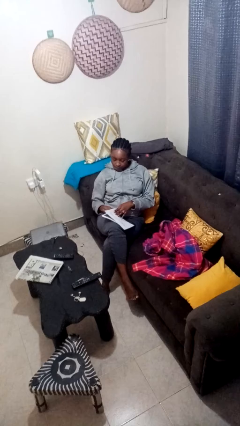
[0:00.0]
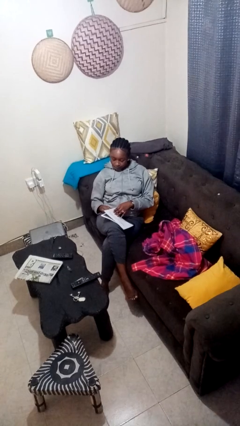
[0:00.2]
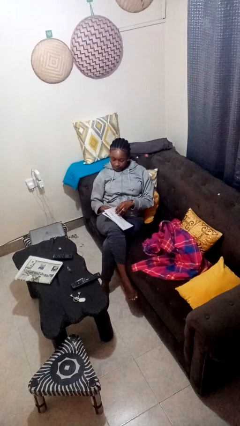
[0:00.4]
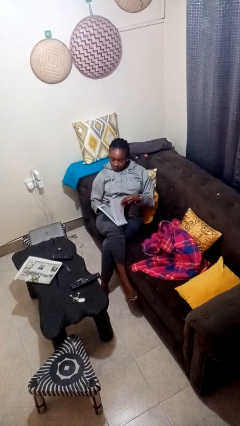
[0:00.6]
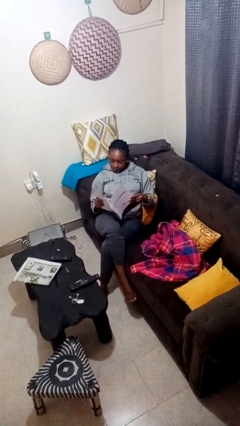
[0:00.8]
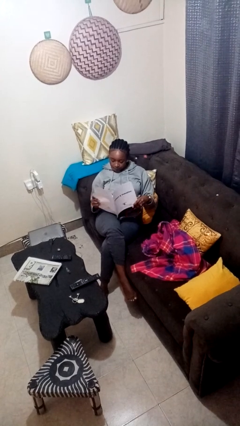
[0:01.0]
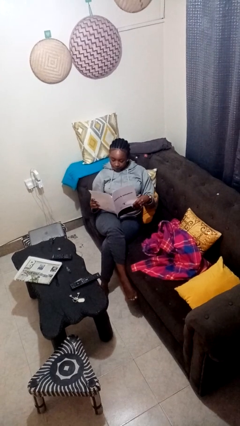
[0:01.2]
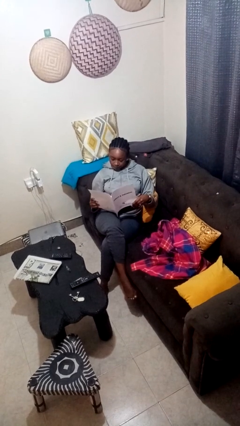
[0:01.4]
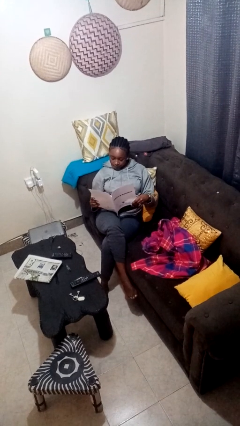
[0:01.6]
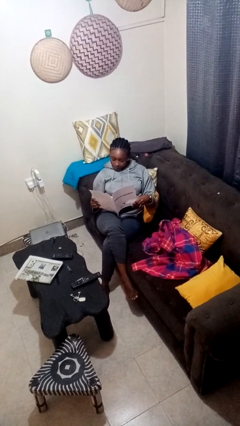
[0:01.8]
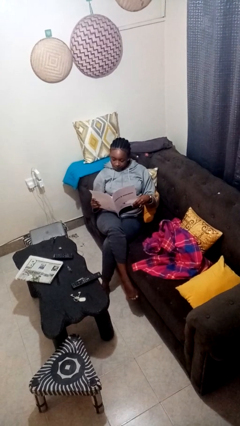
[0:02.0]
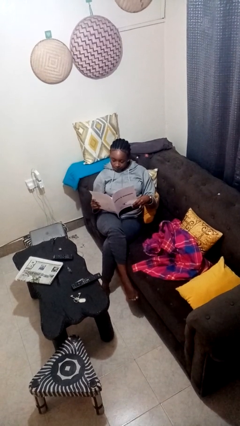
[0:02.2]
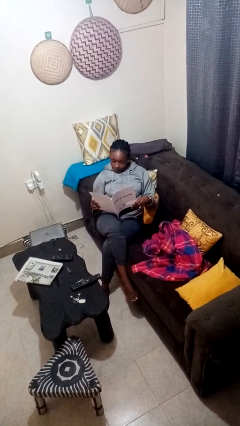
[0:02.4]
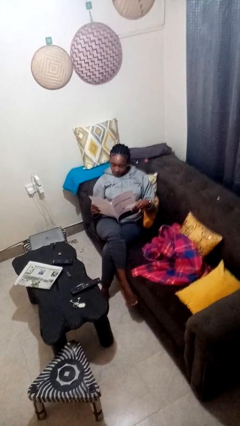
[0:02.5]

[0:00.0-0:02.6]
person reads magazine

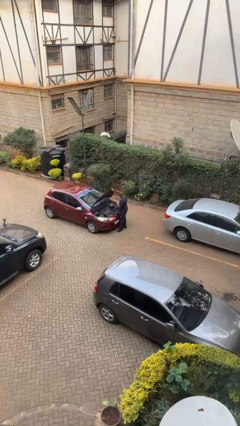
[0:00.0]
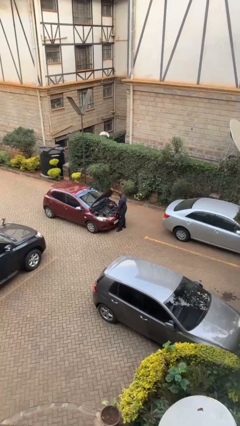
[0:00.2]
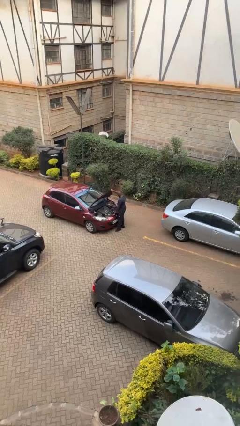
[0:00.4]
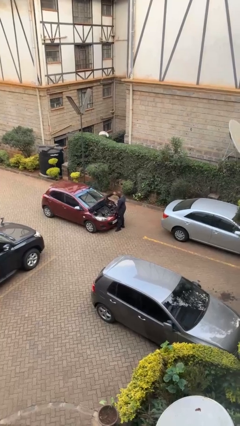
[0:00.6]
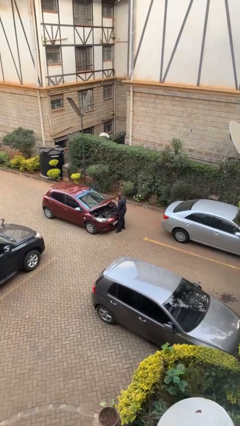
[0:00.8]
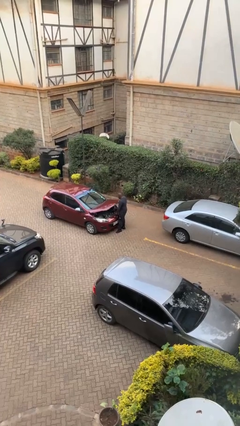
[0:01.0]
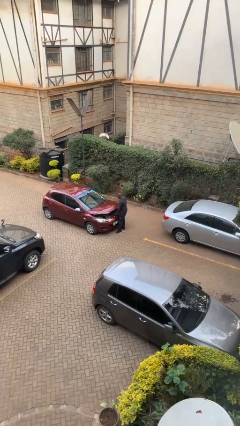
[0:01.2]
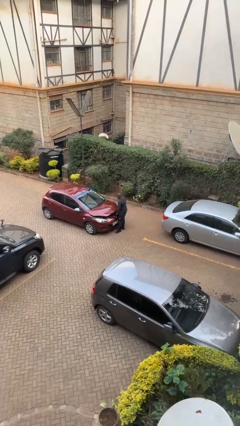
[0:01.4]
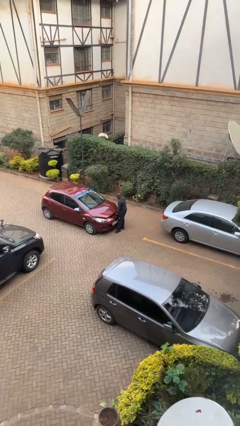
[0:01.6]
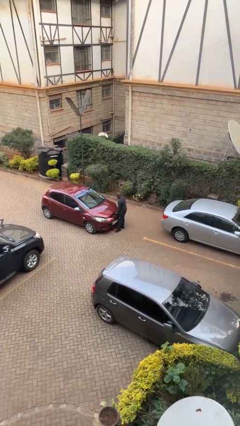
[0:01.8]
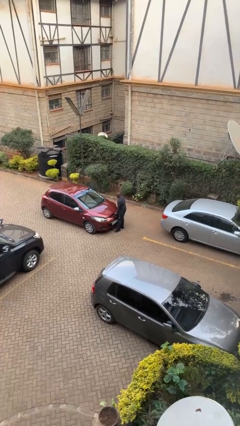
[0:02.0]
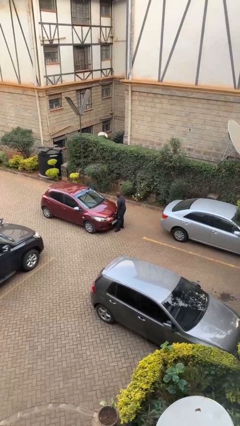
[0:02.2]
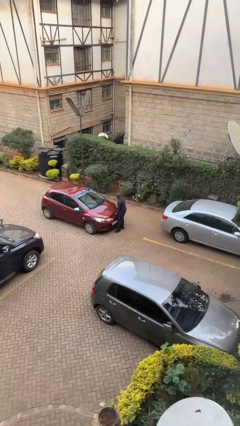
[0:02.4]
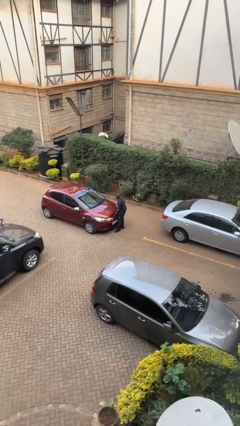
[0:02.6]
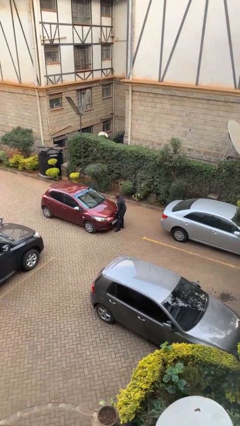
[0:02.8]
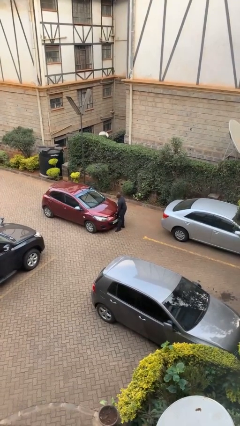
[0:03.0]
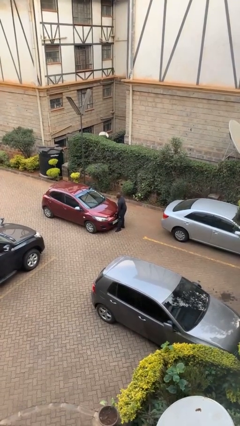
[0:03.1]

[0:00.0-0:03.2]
person closes car hood

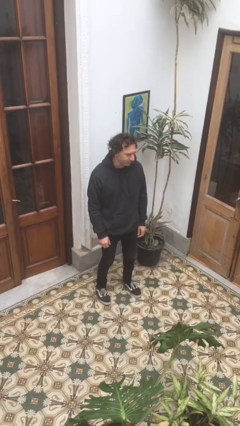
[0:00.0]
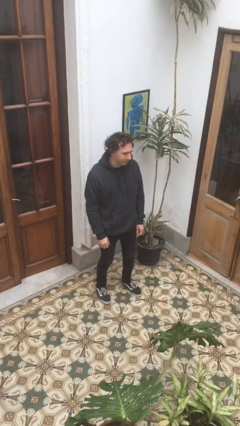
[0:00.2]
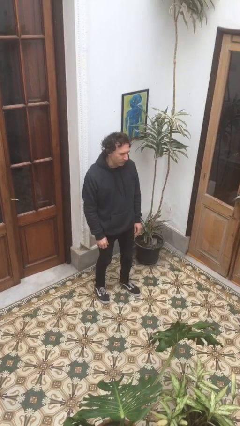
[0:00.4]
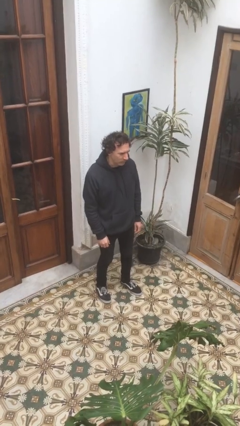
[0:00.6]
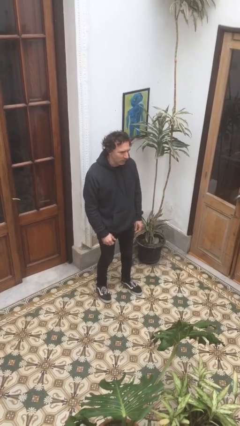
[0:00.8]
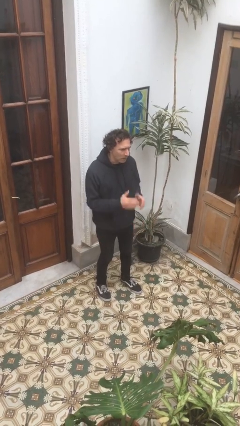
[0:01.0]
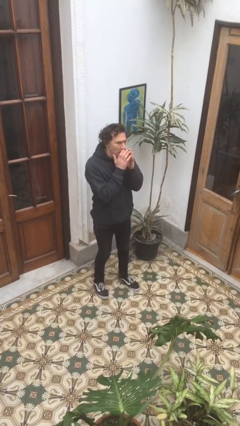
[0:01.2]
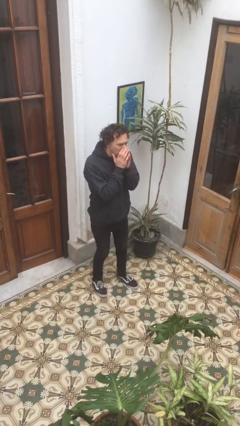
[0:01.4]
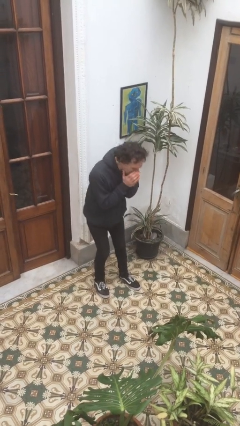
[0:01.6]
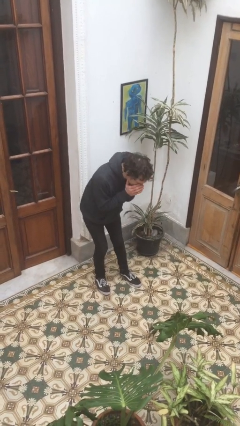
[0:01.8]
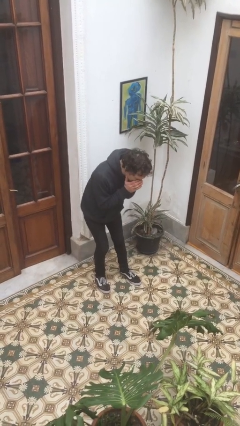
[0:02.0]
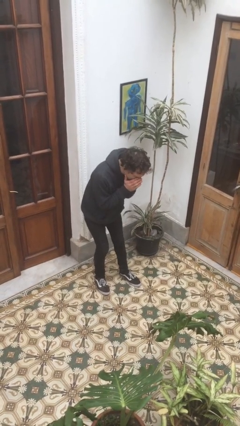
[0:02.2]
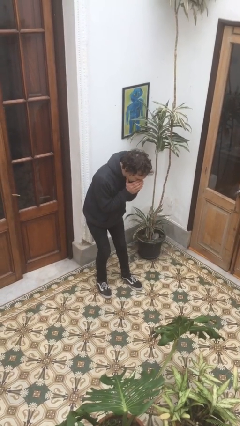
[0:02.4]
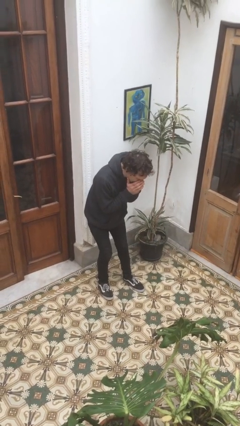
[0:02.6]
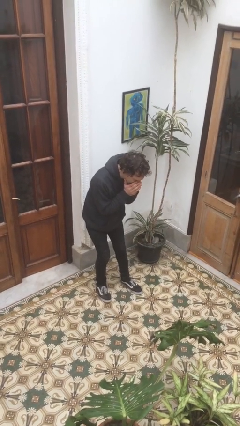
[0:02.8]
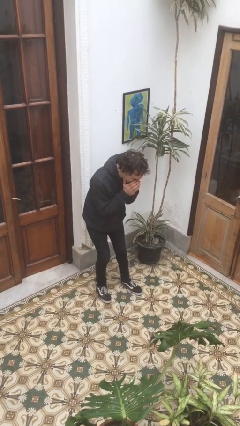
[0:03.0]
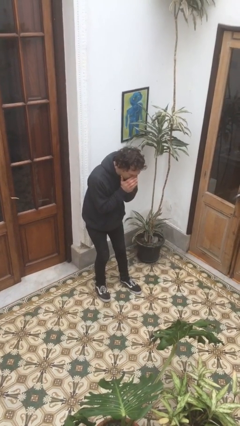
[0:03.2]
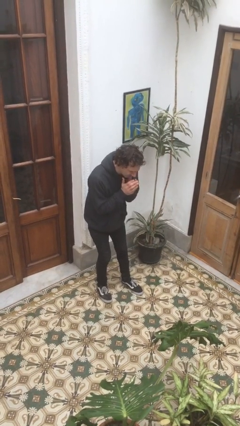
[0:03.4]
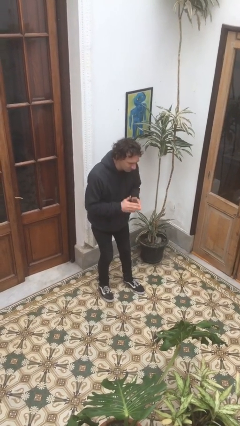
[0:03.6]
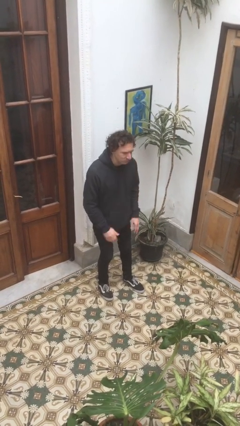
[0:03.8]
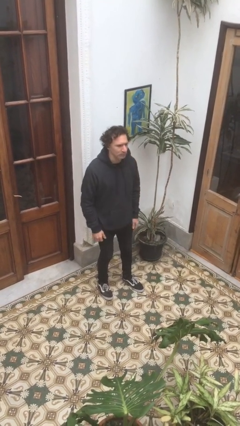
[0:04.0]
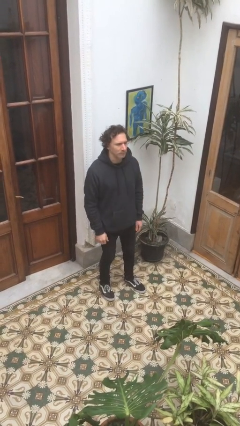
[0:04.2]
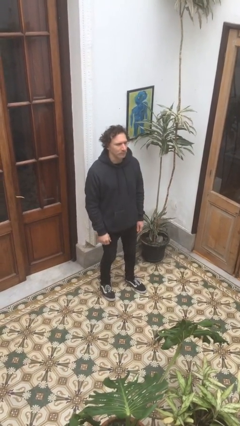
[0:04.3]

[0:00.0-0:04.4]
person sneezes into hand

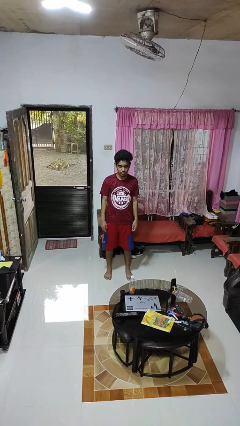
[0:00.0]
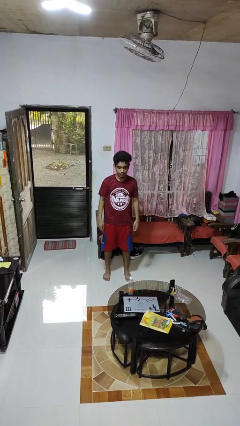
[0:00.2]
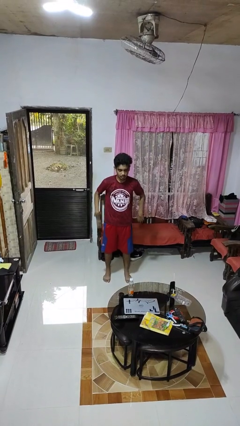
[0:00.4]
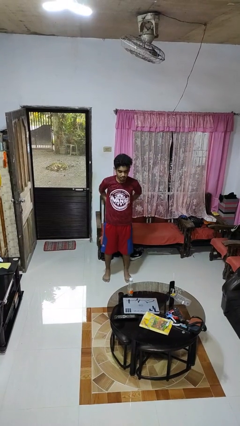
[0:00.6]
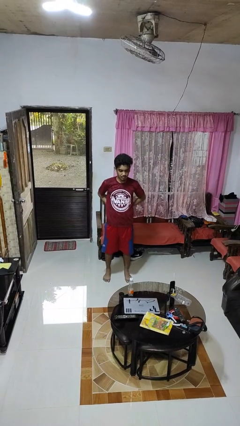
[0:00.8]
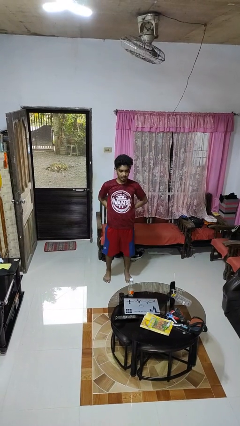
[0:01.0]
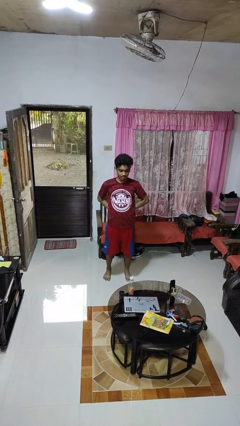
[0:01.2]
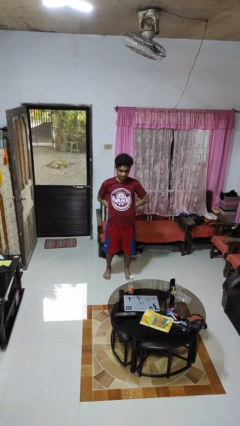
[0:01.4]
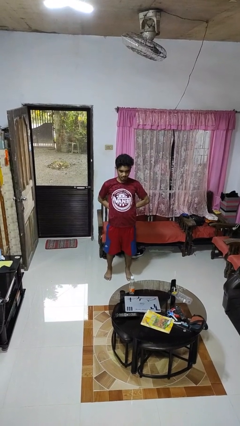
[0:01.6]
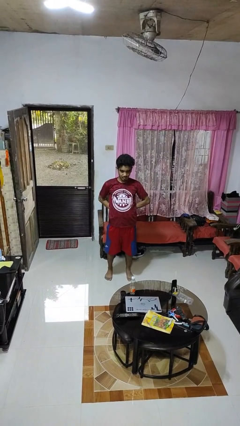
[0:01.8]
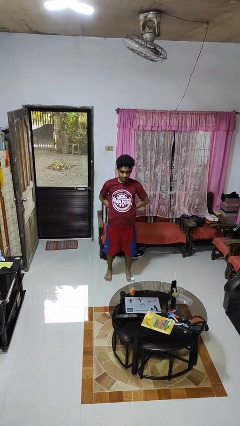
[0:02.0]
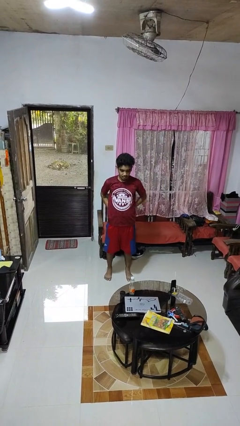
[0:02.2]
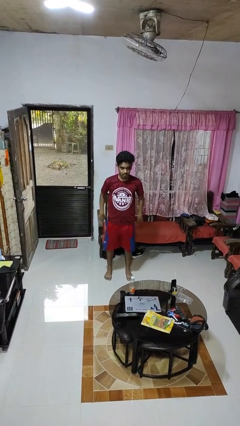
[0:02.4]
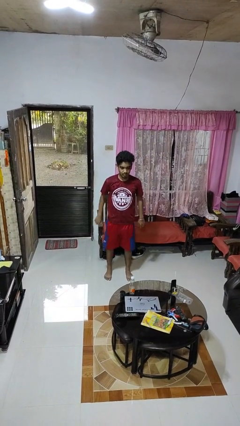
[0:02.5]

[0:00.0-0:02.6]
person stretches back

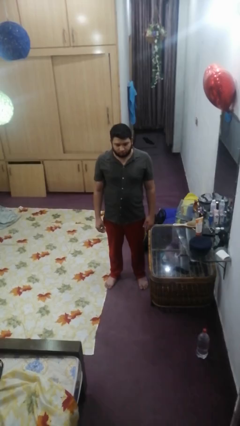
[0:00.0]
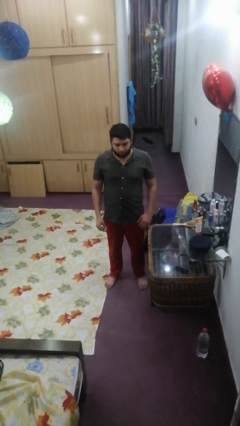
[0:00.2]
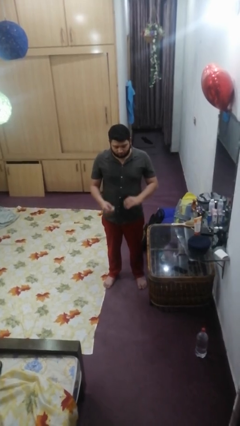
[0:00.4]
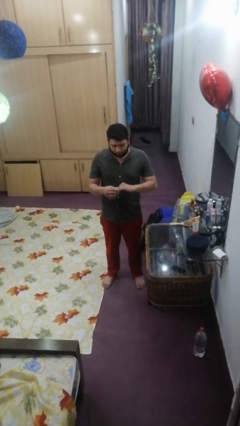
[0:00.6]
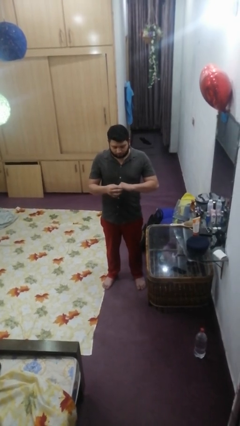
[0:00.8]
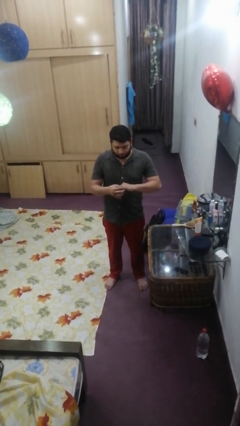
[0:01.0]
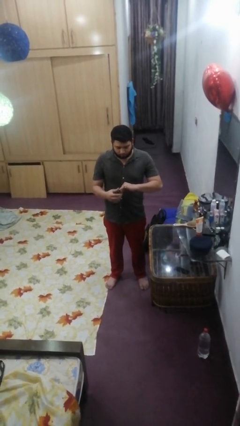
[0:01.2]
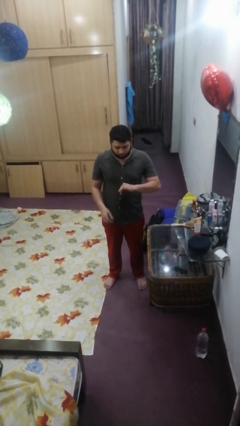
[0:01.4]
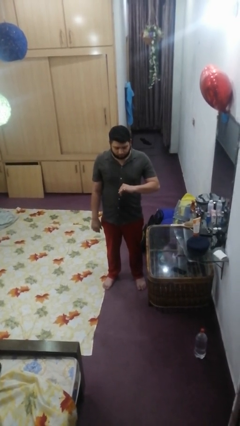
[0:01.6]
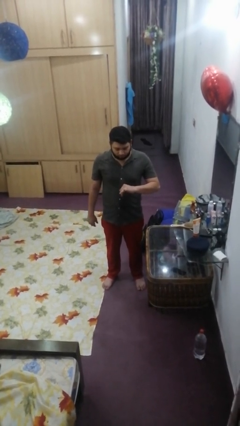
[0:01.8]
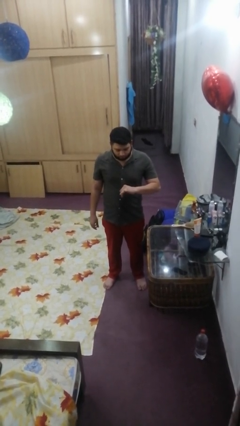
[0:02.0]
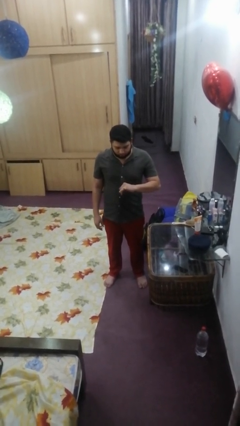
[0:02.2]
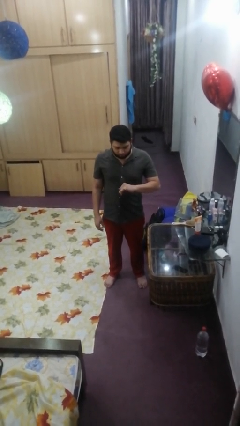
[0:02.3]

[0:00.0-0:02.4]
person puts on ring

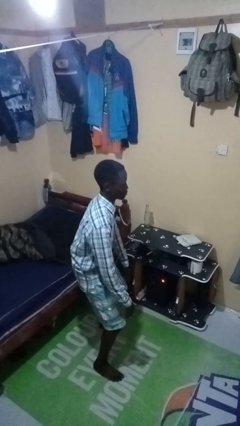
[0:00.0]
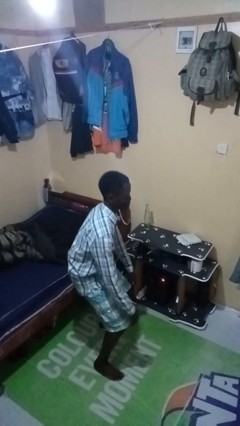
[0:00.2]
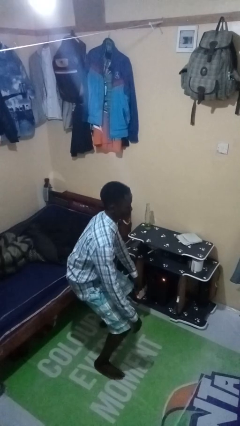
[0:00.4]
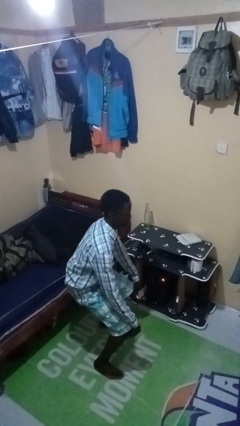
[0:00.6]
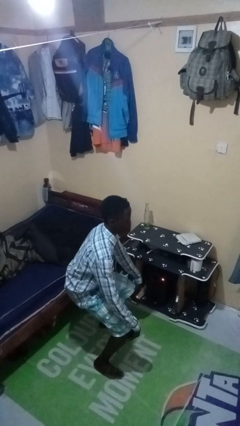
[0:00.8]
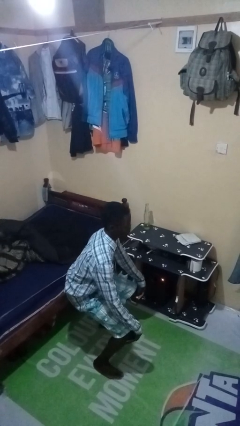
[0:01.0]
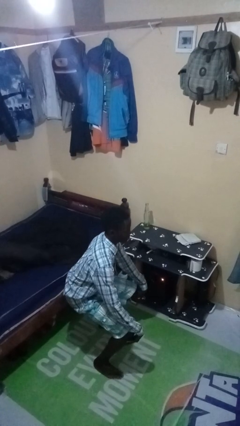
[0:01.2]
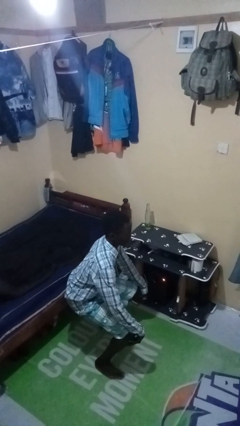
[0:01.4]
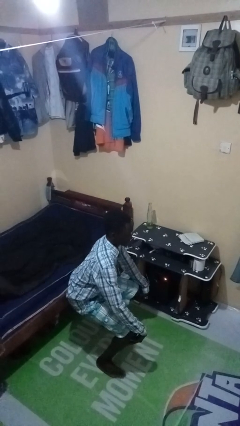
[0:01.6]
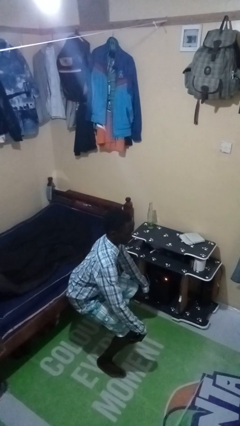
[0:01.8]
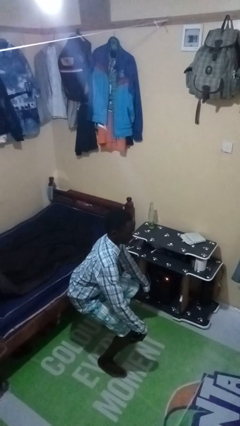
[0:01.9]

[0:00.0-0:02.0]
person squats
